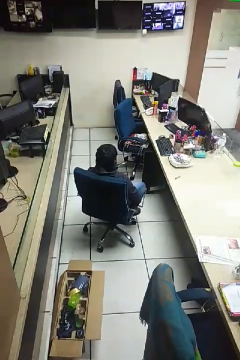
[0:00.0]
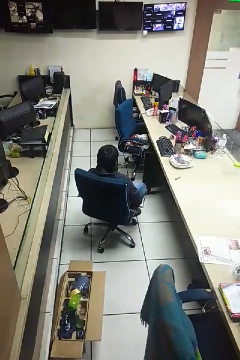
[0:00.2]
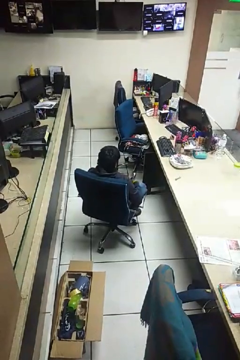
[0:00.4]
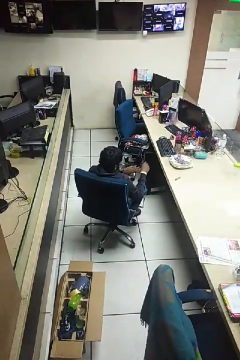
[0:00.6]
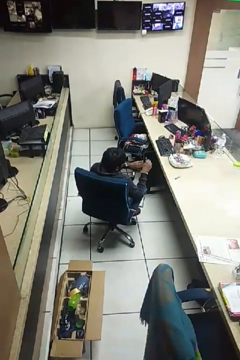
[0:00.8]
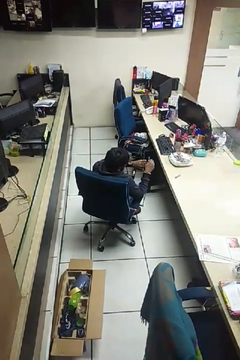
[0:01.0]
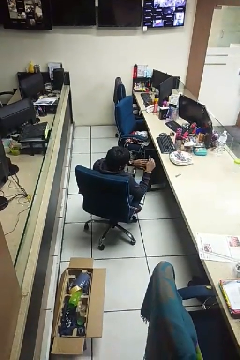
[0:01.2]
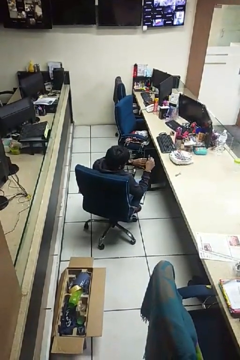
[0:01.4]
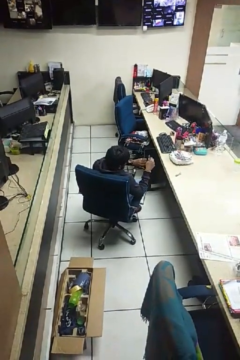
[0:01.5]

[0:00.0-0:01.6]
person files fingernails

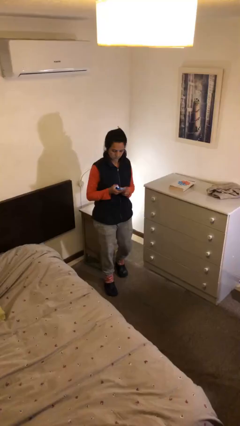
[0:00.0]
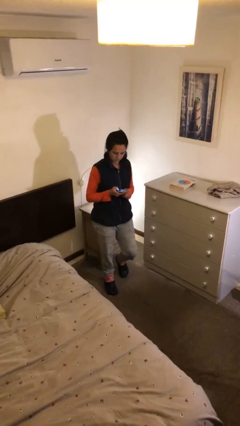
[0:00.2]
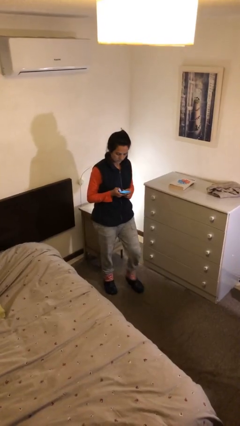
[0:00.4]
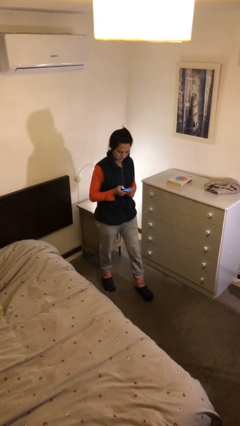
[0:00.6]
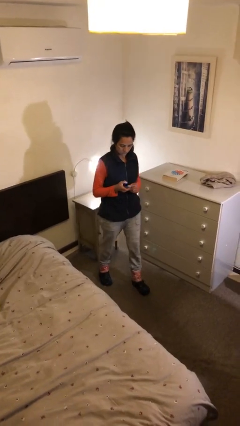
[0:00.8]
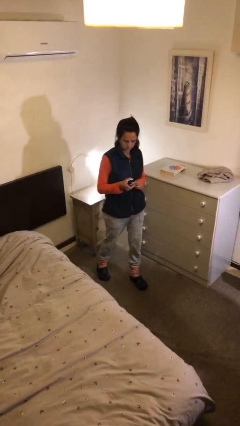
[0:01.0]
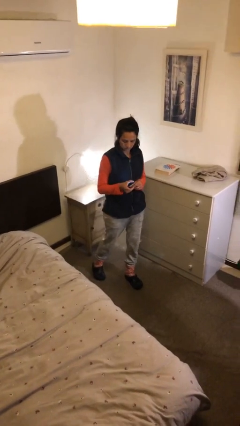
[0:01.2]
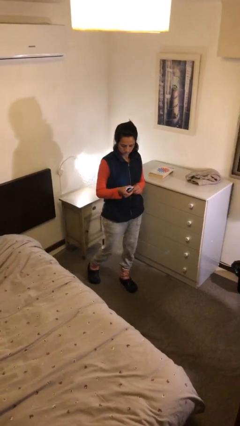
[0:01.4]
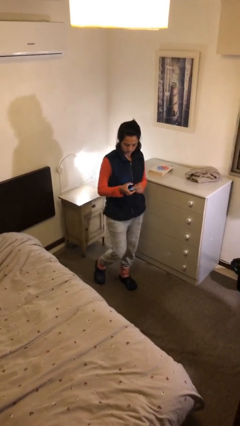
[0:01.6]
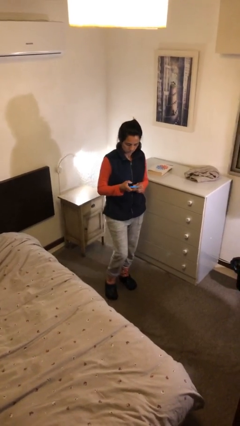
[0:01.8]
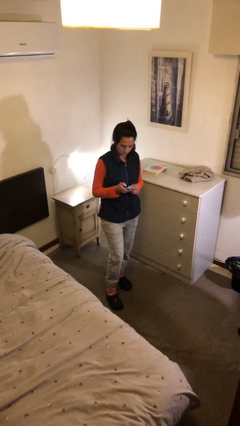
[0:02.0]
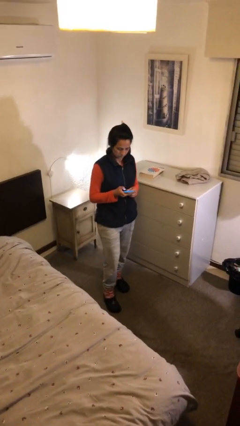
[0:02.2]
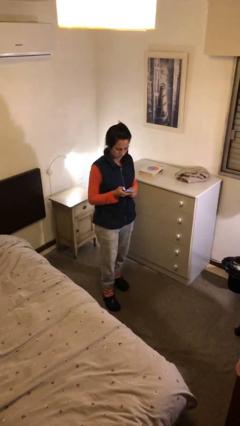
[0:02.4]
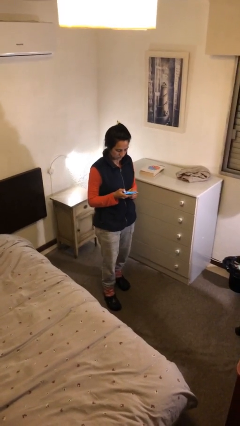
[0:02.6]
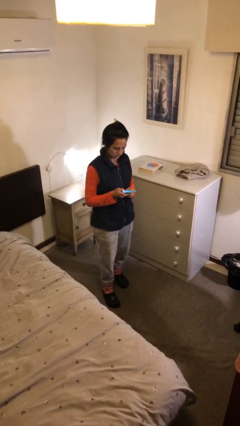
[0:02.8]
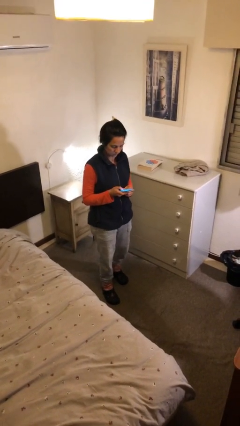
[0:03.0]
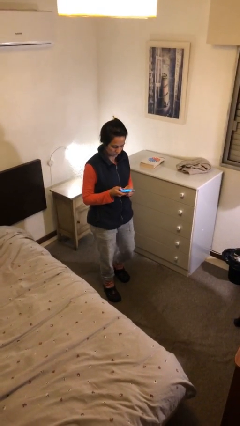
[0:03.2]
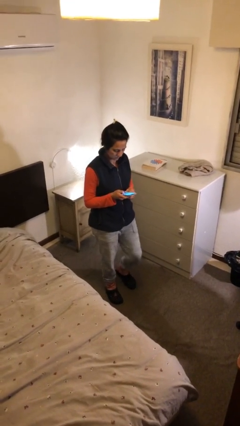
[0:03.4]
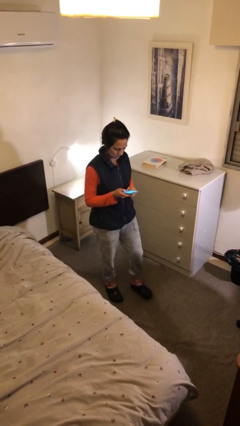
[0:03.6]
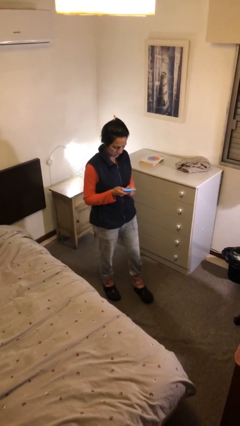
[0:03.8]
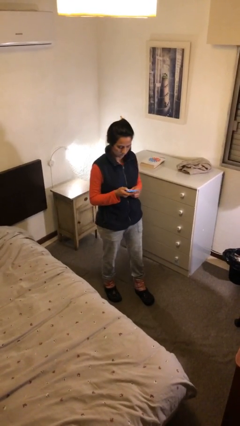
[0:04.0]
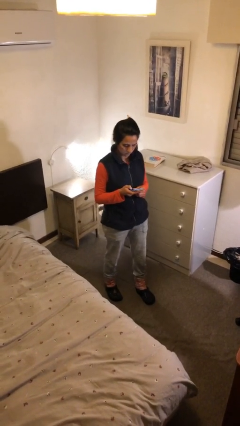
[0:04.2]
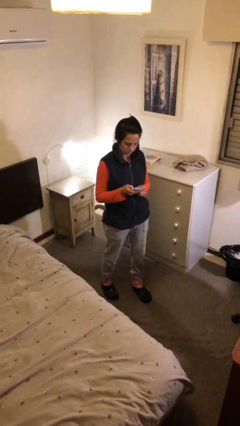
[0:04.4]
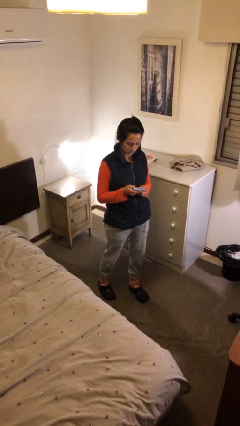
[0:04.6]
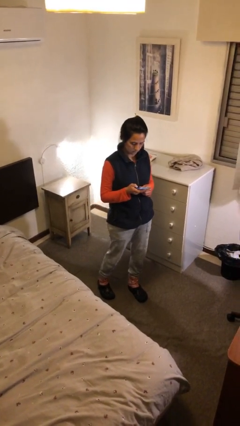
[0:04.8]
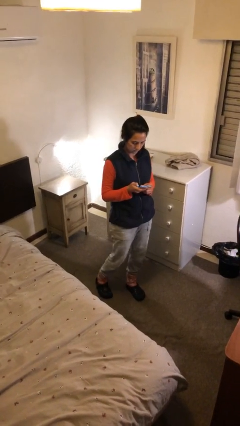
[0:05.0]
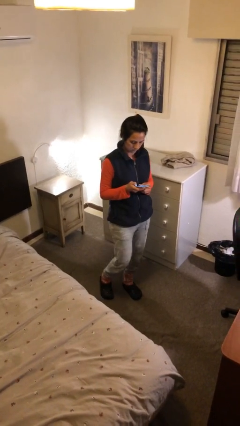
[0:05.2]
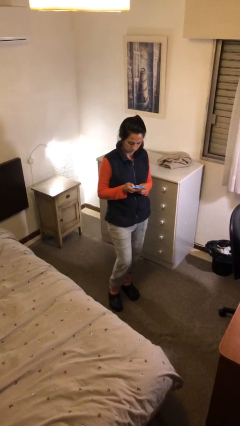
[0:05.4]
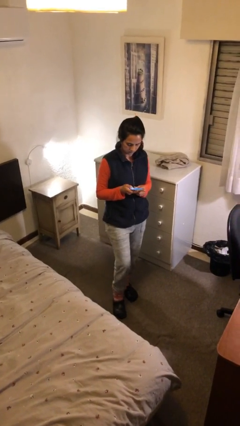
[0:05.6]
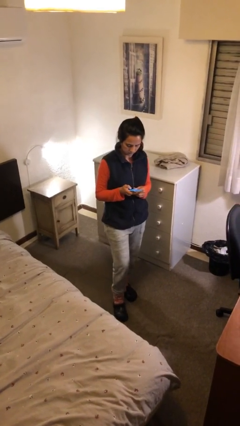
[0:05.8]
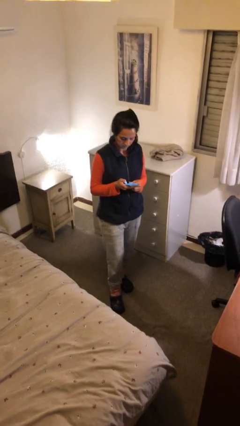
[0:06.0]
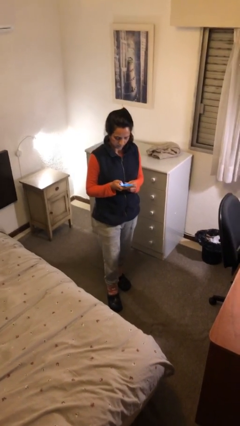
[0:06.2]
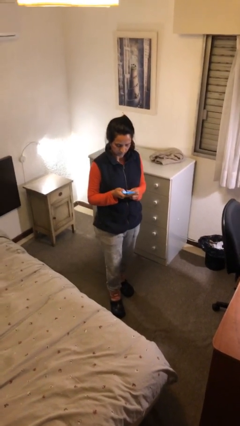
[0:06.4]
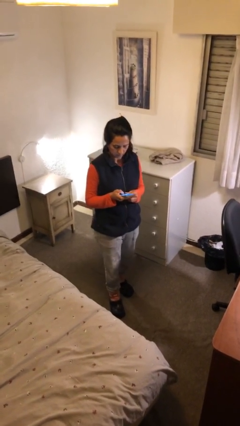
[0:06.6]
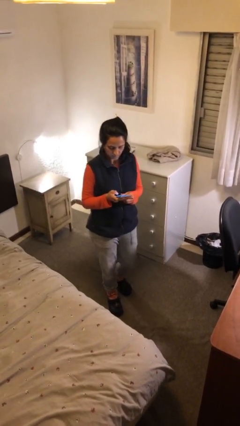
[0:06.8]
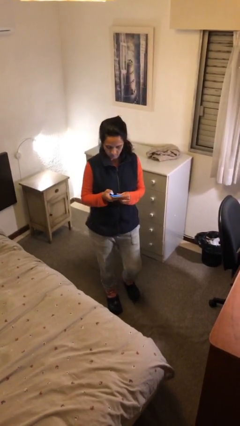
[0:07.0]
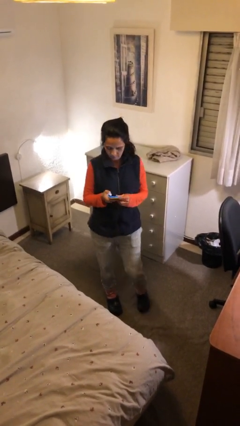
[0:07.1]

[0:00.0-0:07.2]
person texts on phone

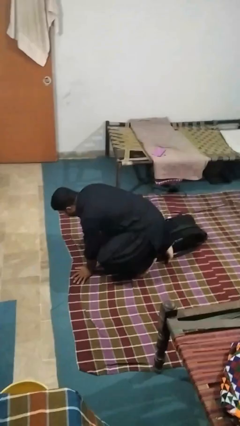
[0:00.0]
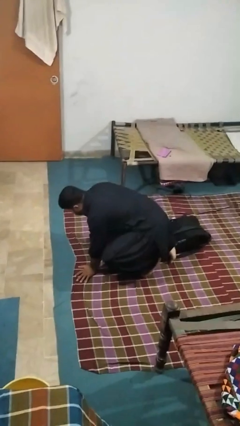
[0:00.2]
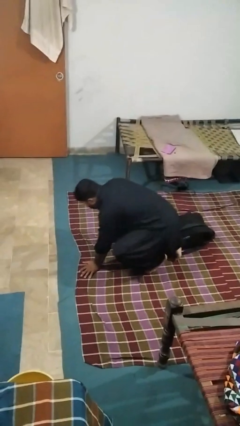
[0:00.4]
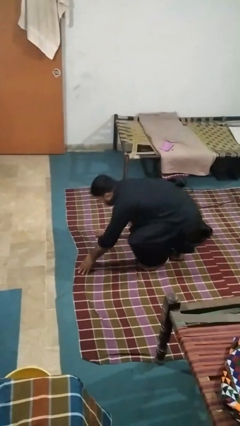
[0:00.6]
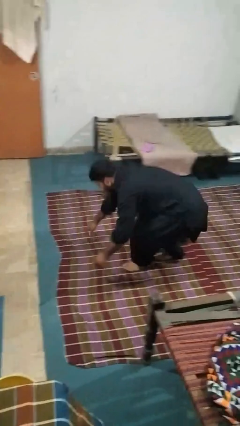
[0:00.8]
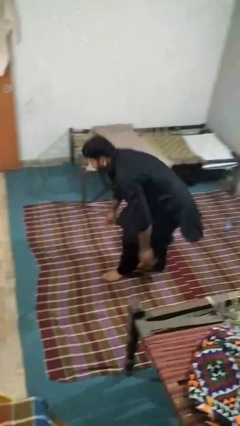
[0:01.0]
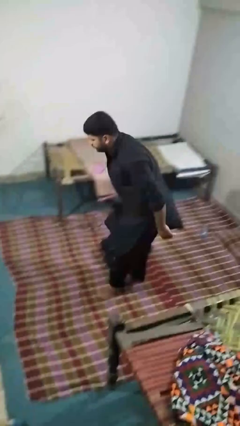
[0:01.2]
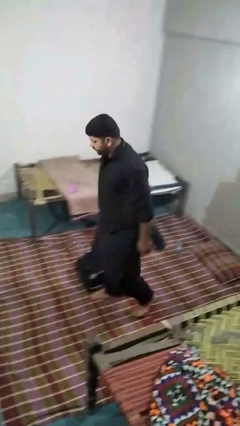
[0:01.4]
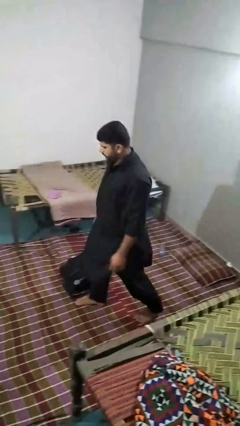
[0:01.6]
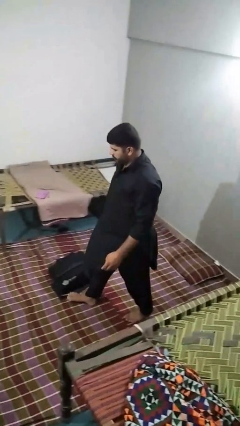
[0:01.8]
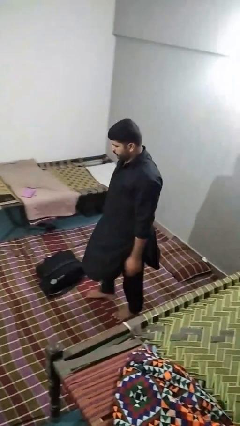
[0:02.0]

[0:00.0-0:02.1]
person stands up from floor

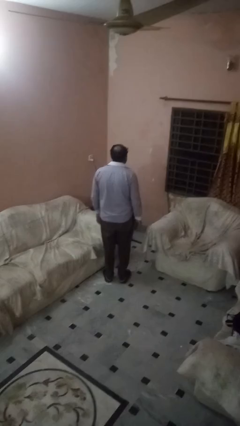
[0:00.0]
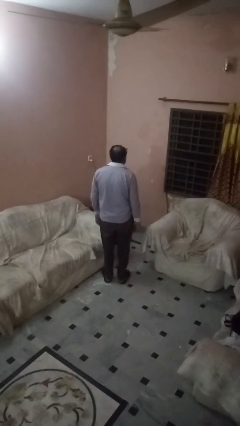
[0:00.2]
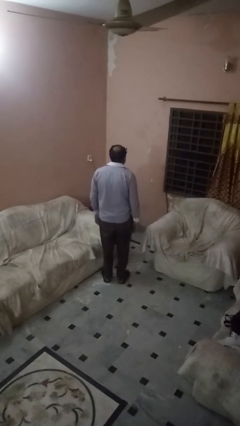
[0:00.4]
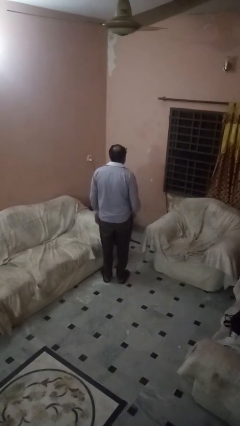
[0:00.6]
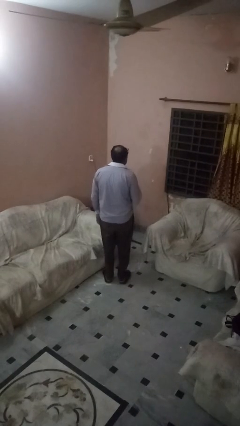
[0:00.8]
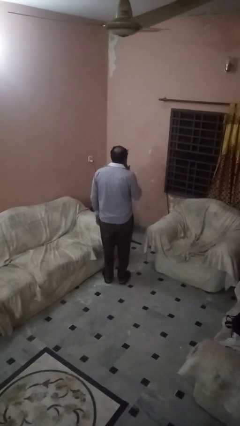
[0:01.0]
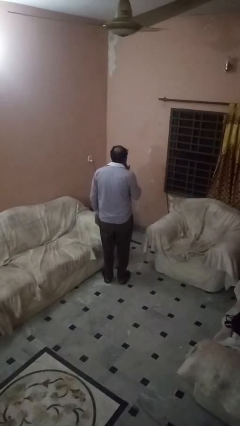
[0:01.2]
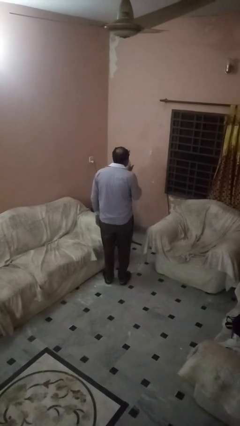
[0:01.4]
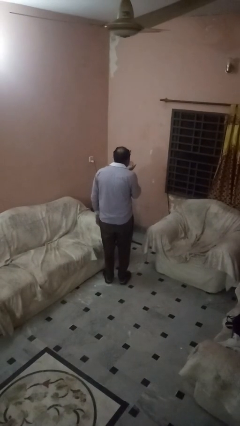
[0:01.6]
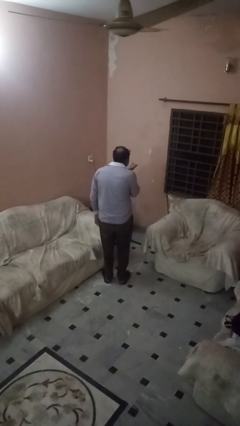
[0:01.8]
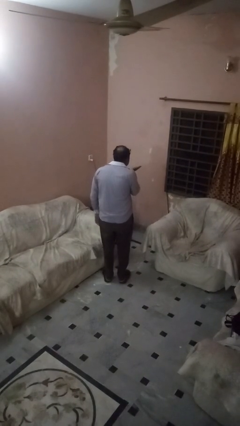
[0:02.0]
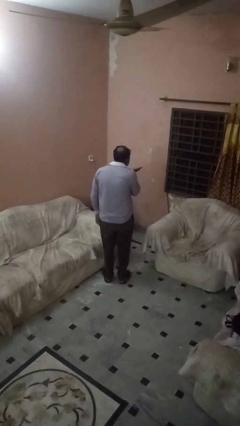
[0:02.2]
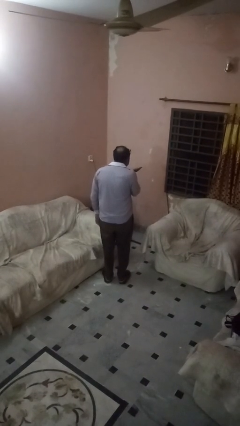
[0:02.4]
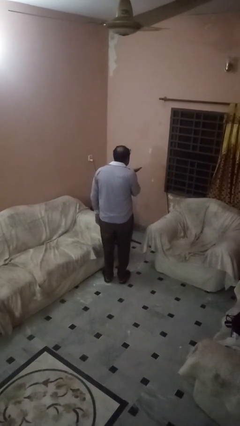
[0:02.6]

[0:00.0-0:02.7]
person gestures blow kiss

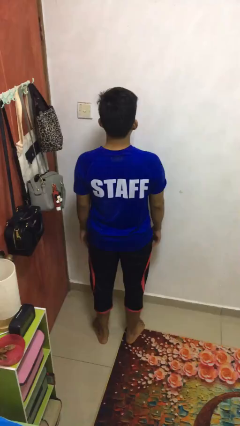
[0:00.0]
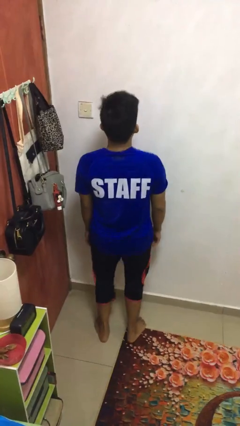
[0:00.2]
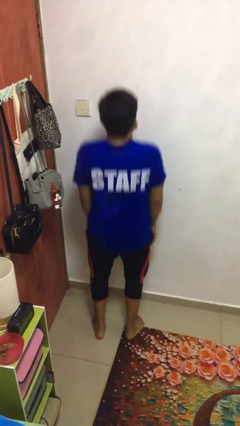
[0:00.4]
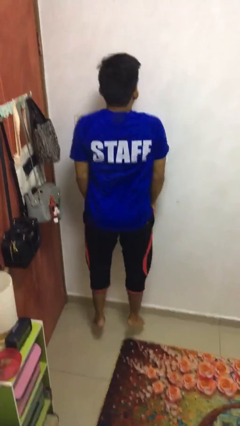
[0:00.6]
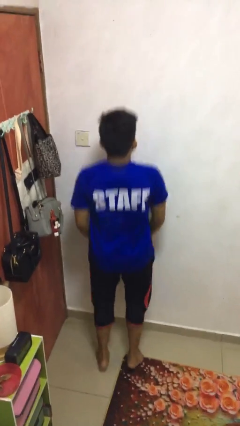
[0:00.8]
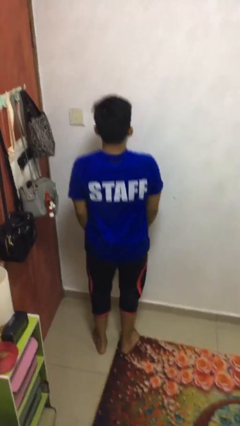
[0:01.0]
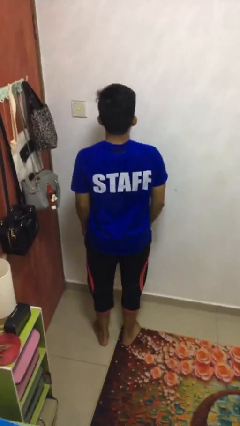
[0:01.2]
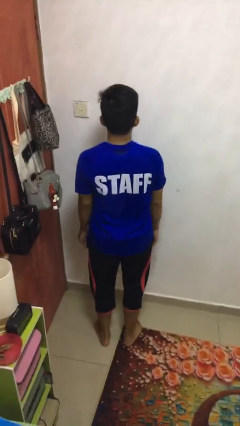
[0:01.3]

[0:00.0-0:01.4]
person jumps

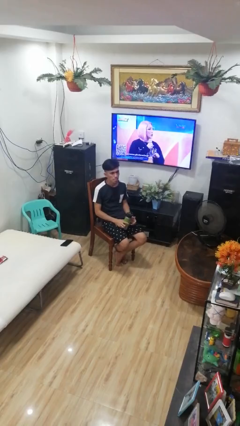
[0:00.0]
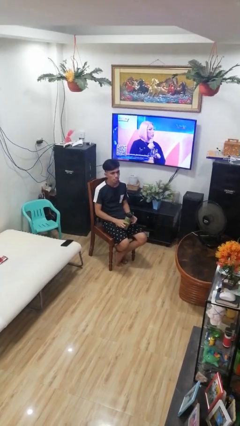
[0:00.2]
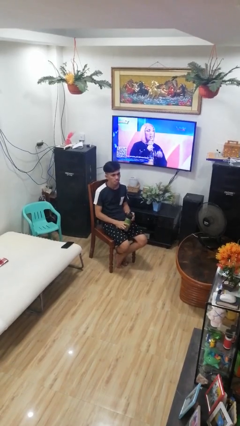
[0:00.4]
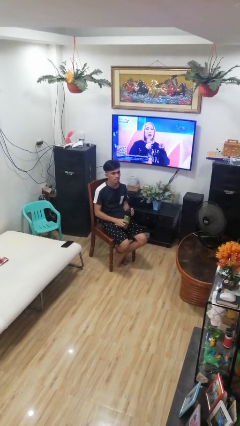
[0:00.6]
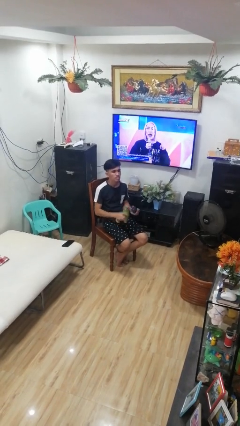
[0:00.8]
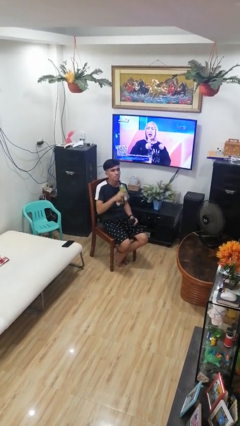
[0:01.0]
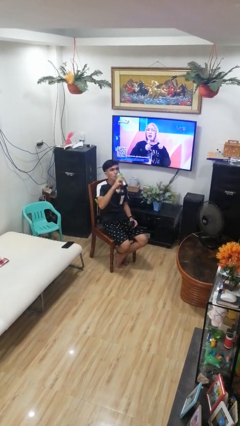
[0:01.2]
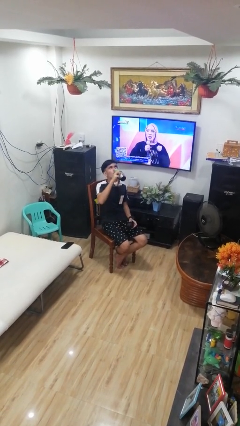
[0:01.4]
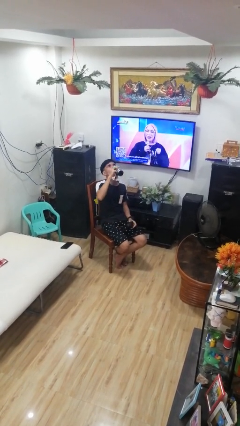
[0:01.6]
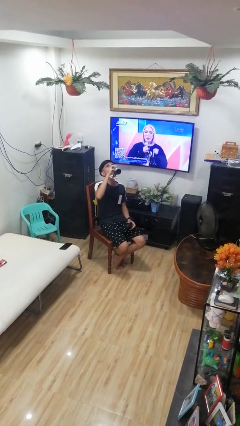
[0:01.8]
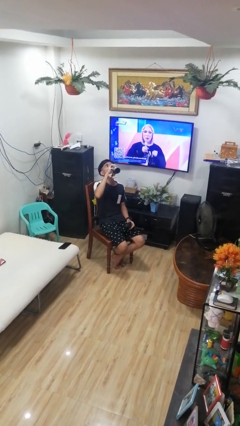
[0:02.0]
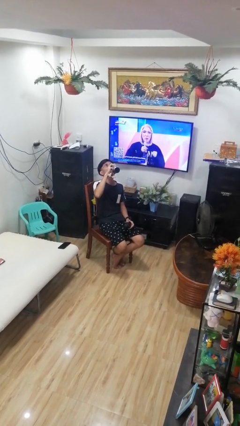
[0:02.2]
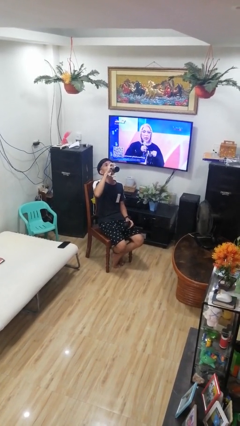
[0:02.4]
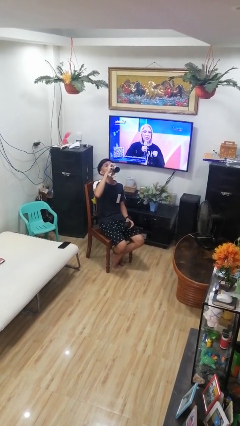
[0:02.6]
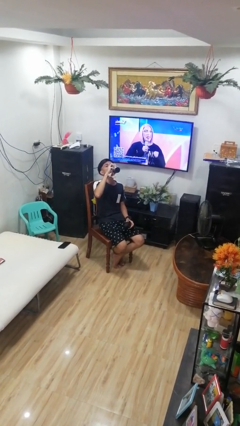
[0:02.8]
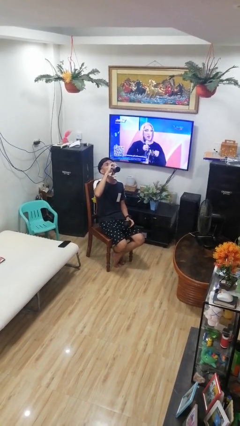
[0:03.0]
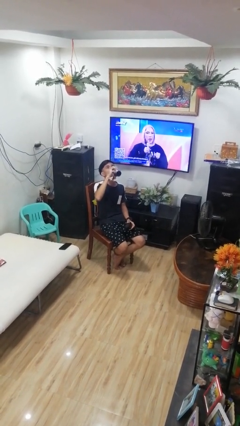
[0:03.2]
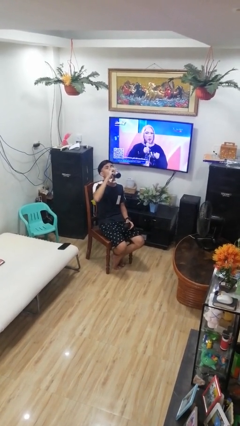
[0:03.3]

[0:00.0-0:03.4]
person drinks from bottle
